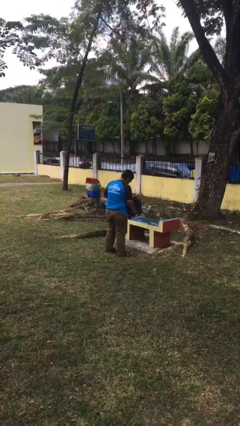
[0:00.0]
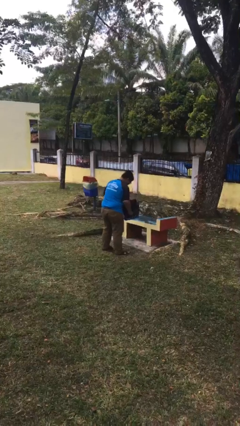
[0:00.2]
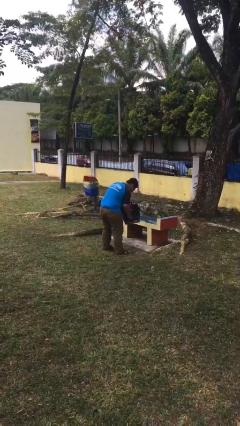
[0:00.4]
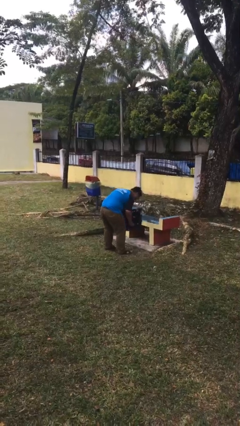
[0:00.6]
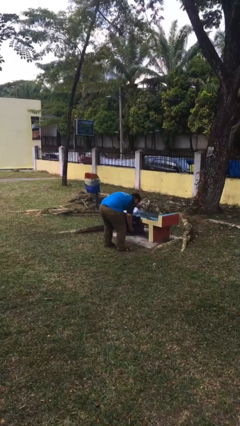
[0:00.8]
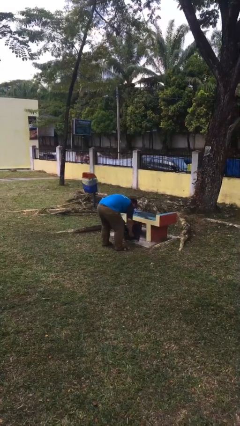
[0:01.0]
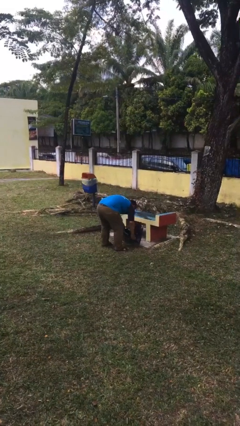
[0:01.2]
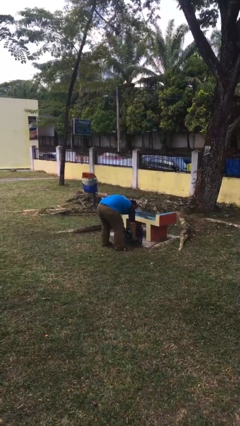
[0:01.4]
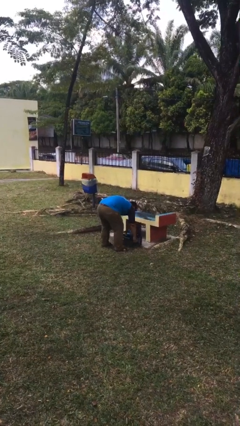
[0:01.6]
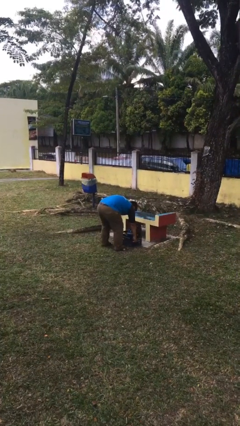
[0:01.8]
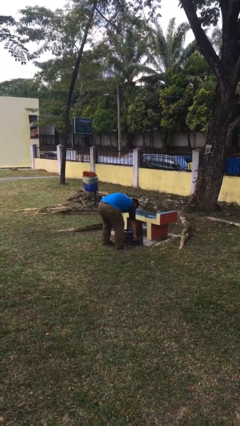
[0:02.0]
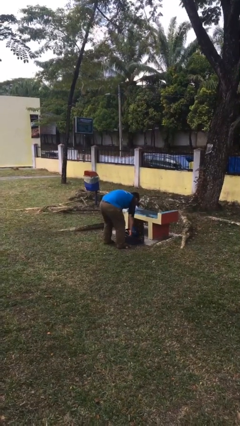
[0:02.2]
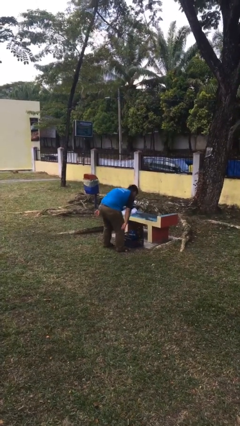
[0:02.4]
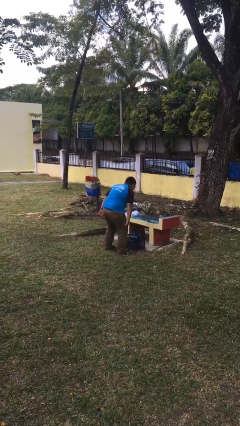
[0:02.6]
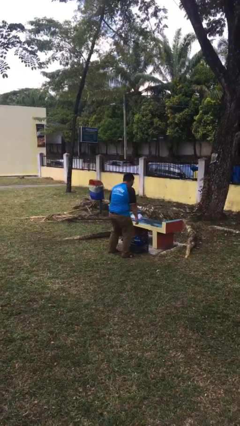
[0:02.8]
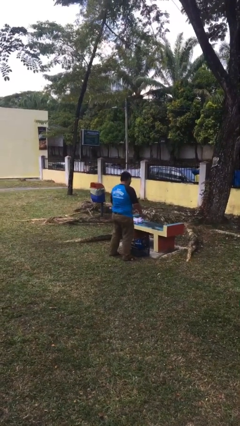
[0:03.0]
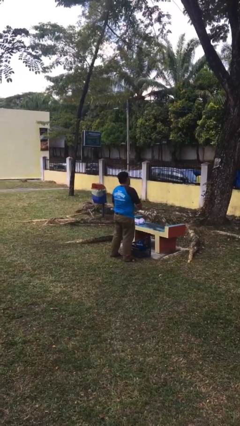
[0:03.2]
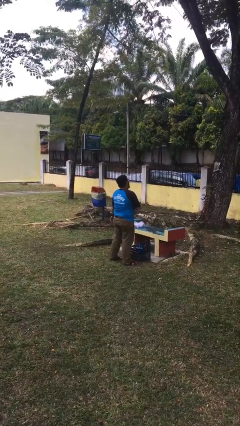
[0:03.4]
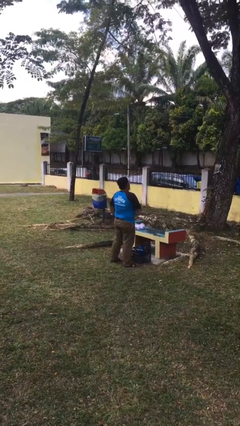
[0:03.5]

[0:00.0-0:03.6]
person puts down object on floor

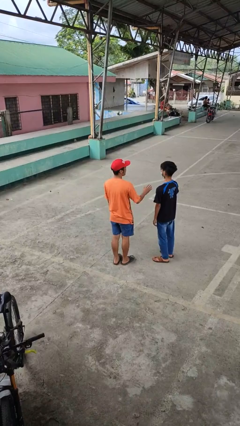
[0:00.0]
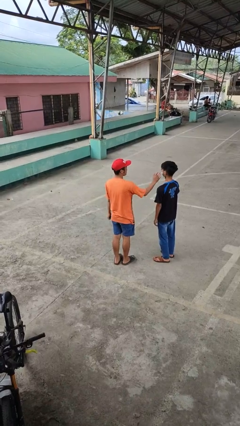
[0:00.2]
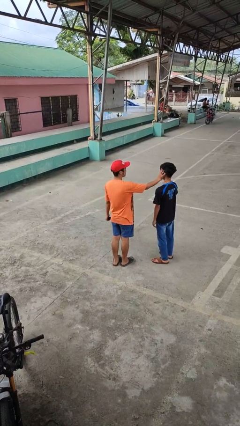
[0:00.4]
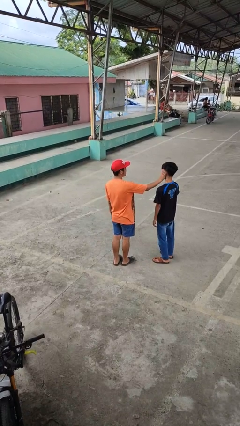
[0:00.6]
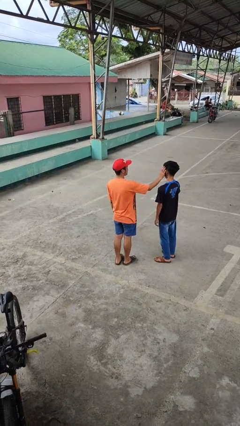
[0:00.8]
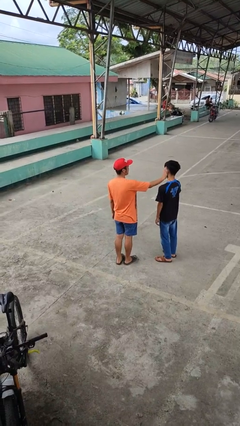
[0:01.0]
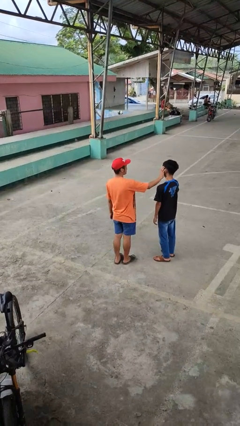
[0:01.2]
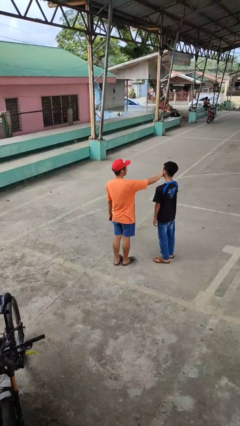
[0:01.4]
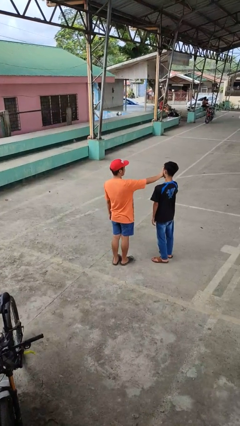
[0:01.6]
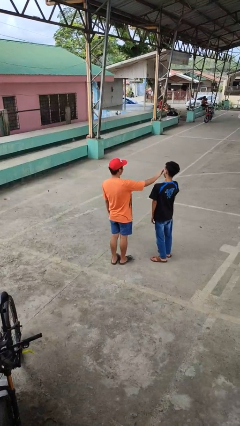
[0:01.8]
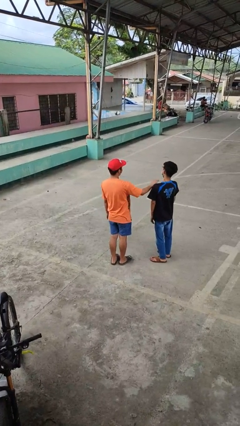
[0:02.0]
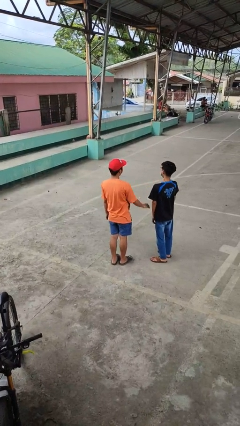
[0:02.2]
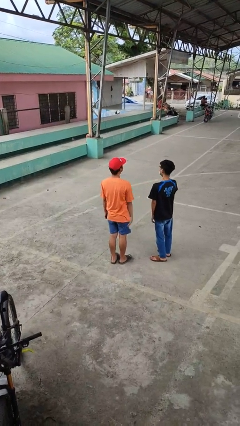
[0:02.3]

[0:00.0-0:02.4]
person touches face of person

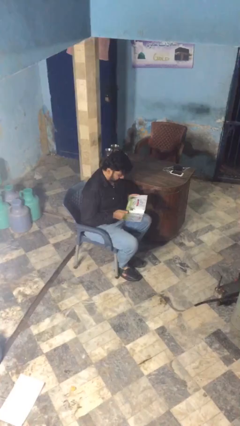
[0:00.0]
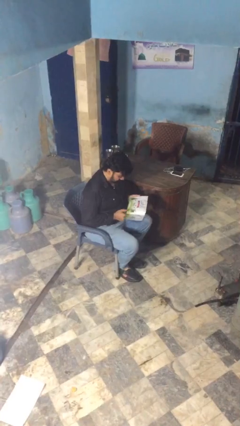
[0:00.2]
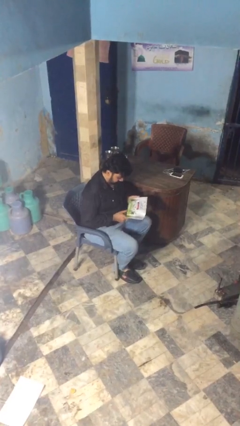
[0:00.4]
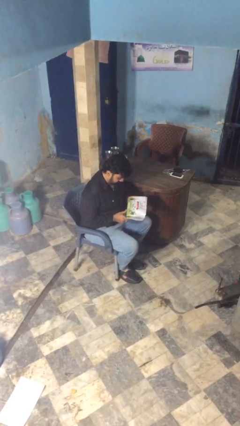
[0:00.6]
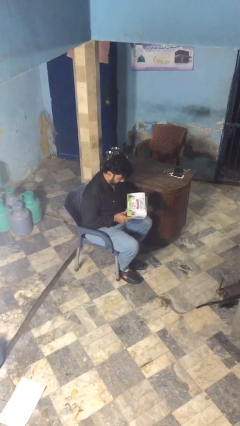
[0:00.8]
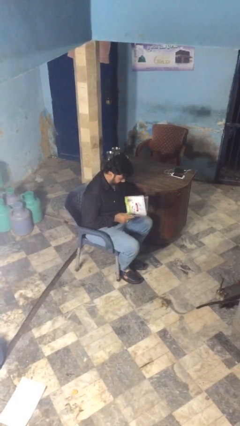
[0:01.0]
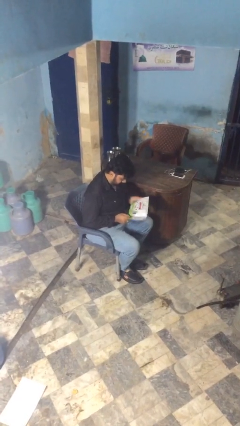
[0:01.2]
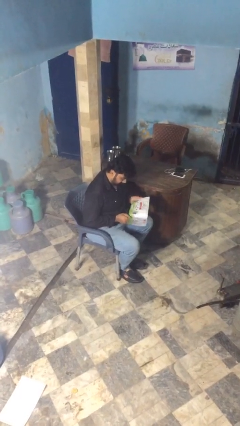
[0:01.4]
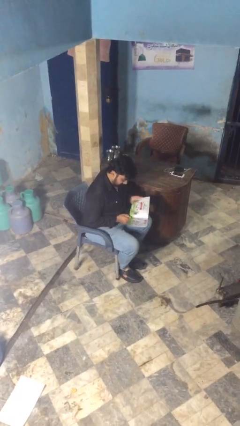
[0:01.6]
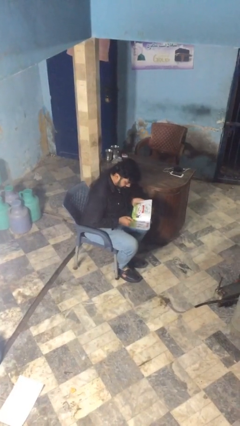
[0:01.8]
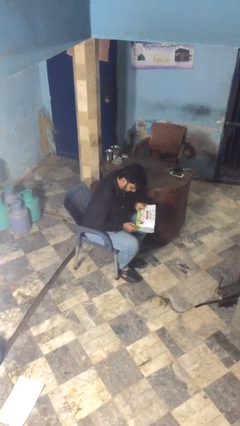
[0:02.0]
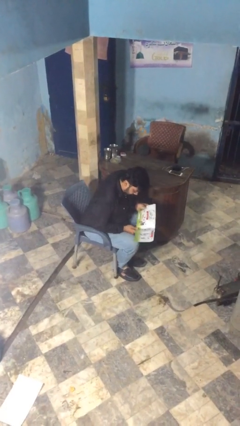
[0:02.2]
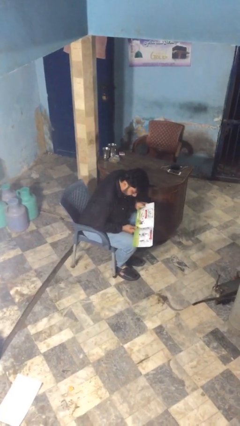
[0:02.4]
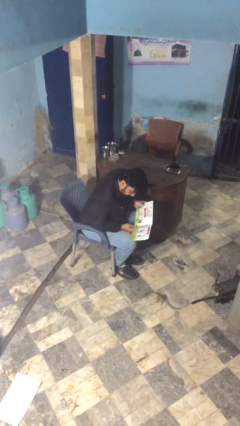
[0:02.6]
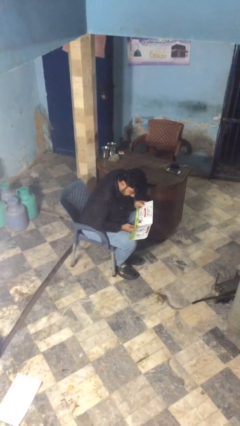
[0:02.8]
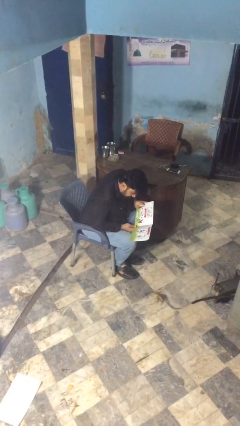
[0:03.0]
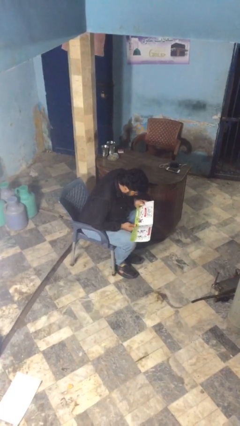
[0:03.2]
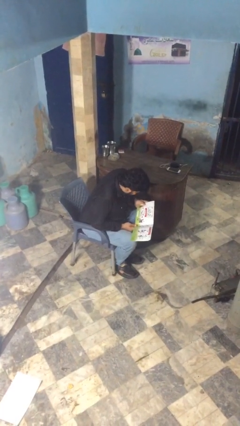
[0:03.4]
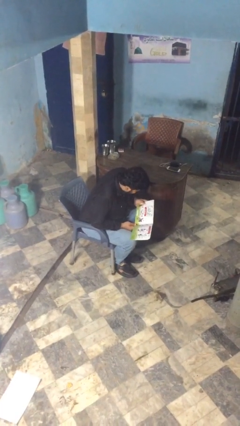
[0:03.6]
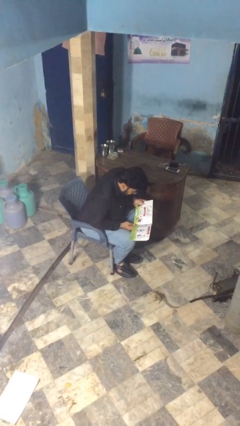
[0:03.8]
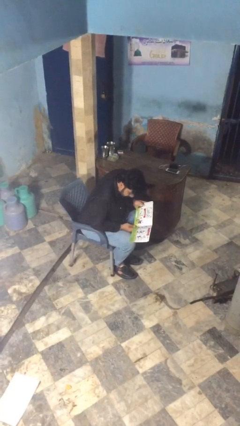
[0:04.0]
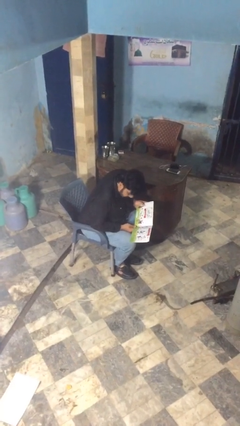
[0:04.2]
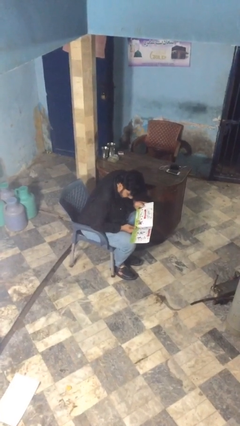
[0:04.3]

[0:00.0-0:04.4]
person reads document

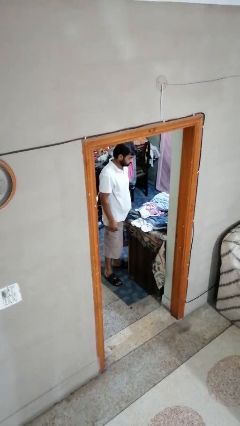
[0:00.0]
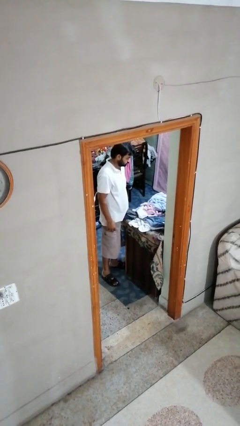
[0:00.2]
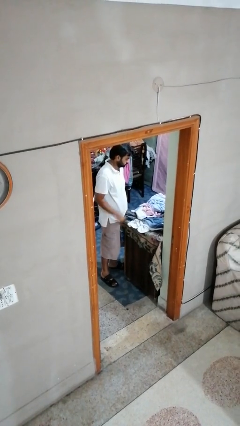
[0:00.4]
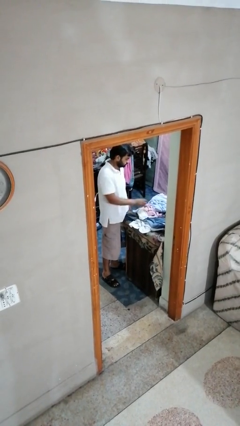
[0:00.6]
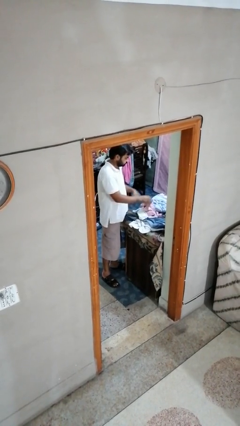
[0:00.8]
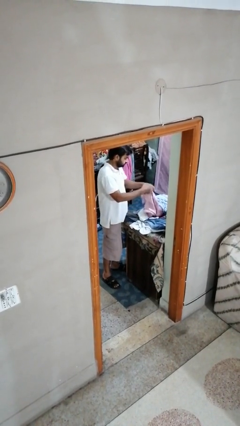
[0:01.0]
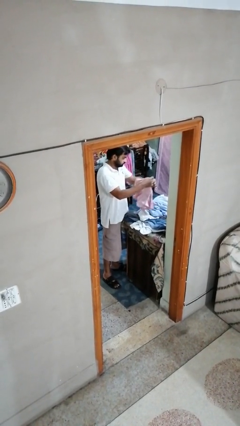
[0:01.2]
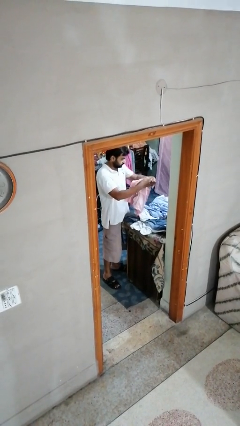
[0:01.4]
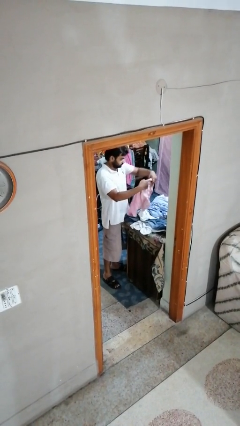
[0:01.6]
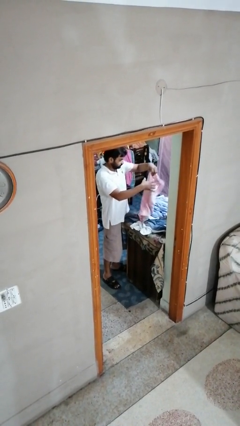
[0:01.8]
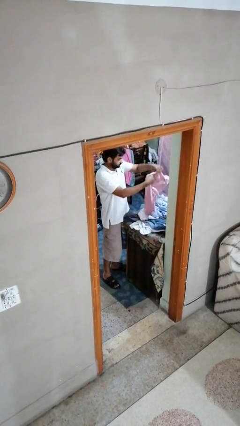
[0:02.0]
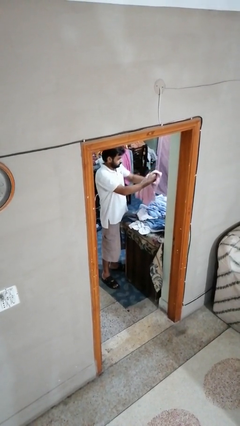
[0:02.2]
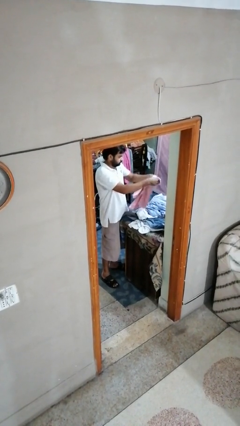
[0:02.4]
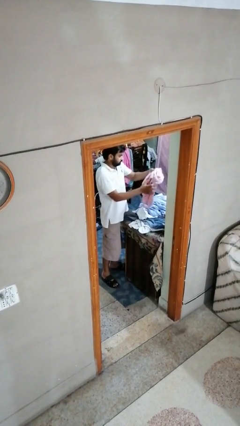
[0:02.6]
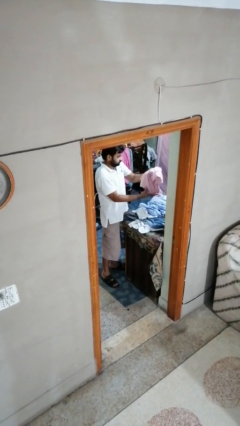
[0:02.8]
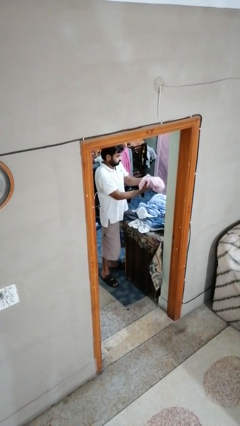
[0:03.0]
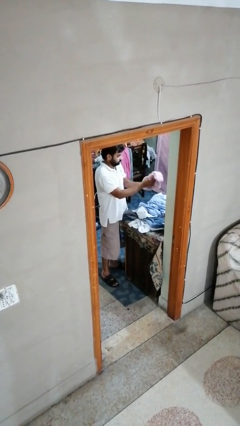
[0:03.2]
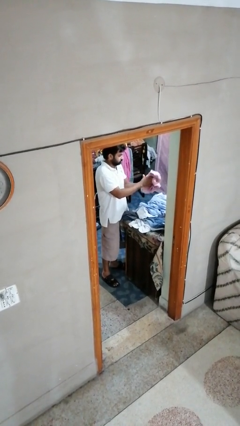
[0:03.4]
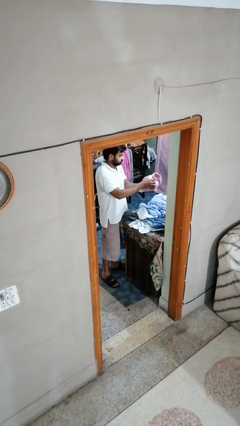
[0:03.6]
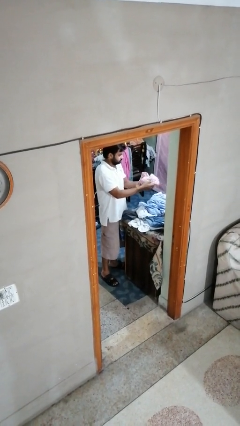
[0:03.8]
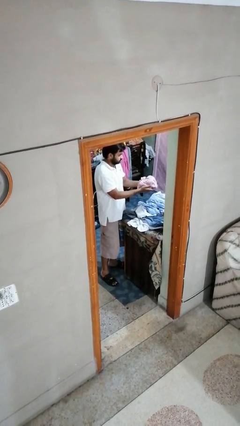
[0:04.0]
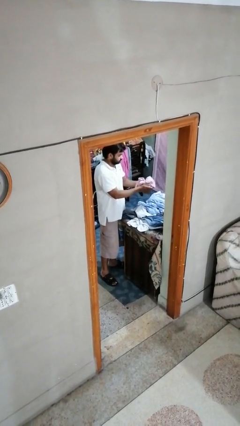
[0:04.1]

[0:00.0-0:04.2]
person folds shirt

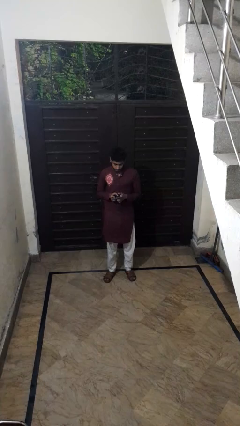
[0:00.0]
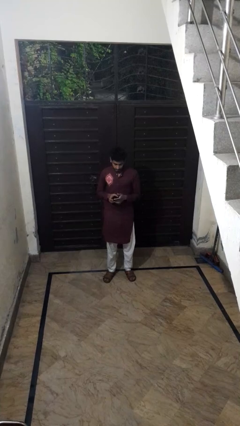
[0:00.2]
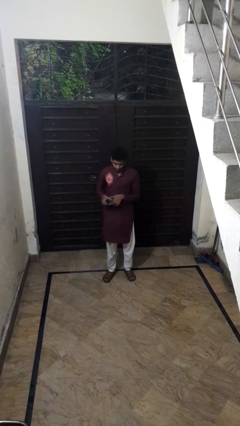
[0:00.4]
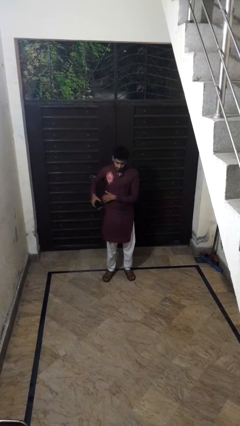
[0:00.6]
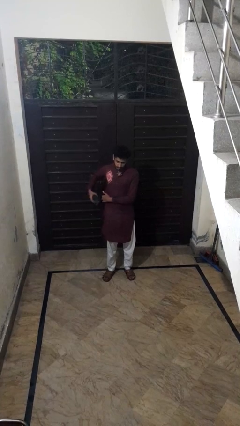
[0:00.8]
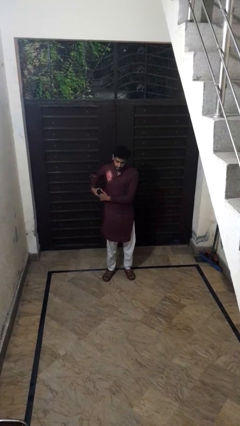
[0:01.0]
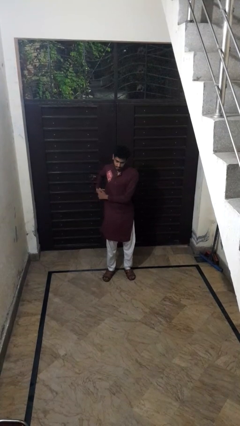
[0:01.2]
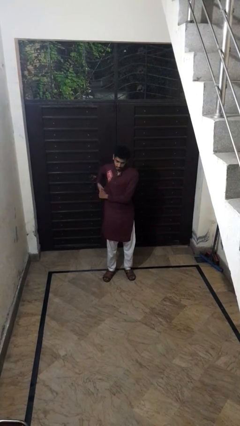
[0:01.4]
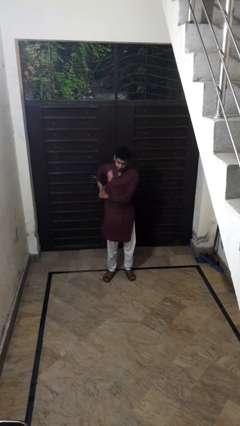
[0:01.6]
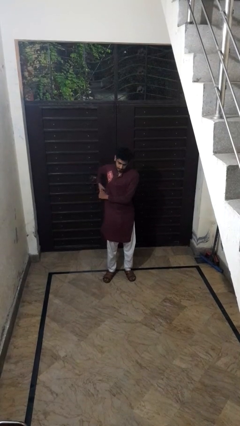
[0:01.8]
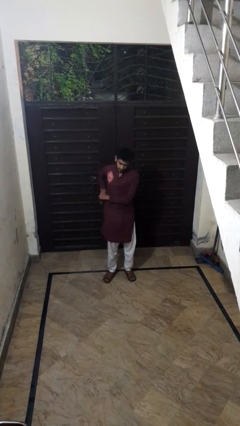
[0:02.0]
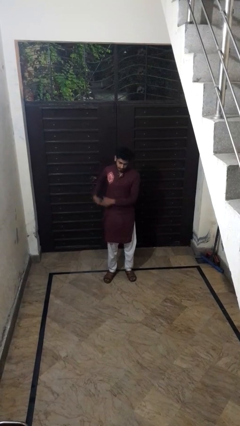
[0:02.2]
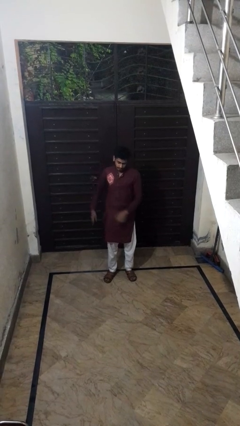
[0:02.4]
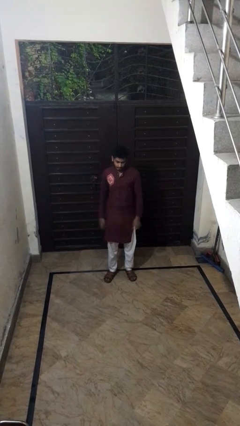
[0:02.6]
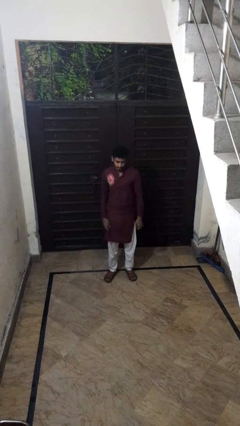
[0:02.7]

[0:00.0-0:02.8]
person puts phone into pocket

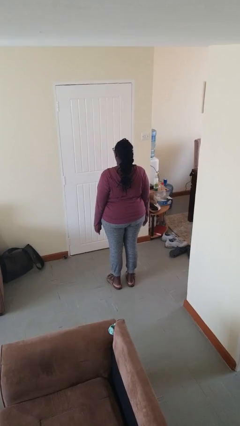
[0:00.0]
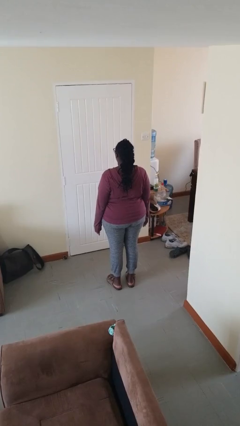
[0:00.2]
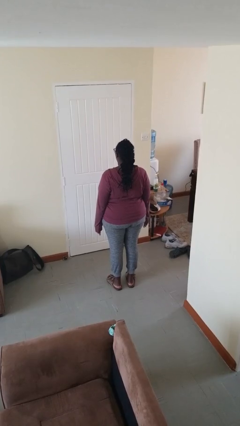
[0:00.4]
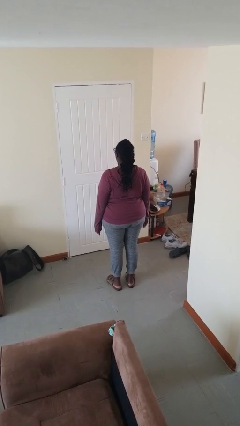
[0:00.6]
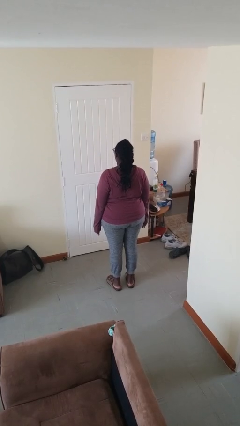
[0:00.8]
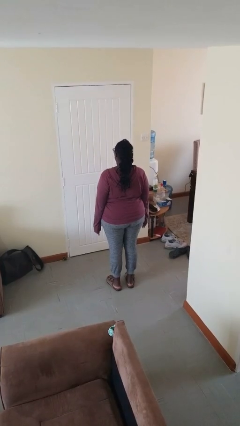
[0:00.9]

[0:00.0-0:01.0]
person bows
